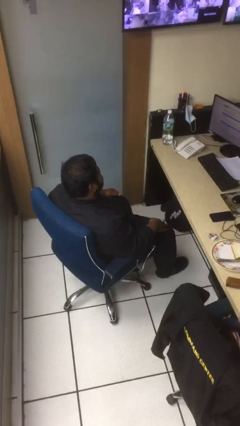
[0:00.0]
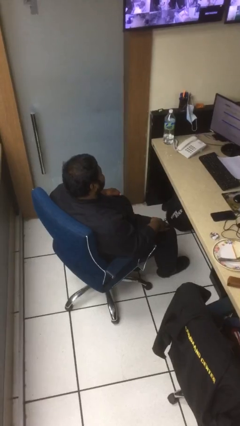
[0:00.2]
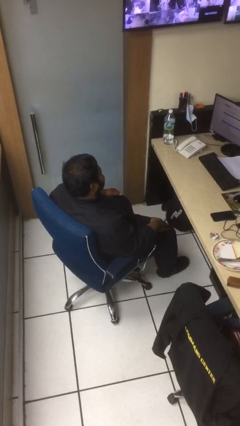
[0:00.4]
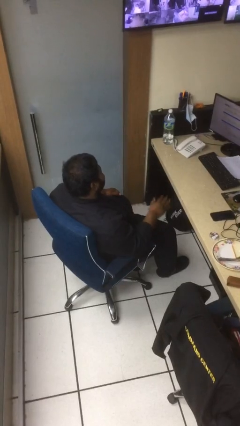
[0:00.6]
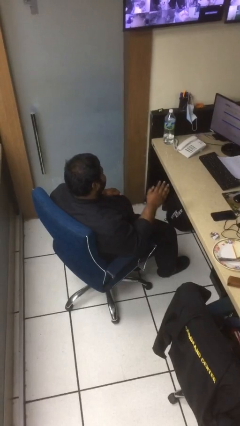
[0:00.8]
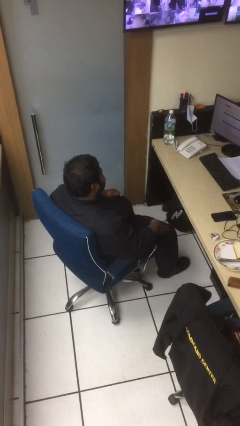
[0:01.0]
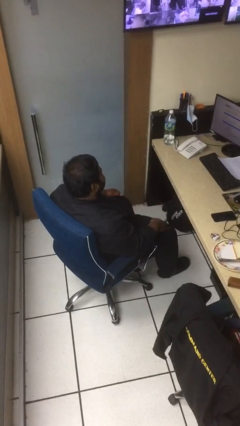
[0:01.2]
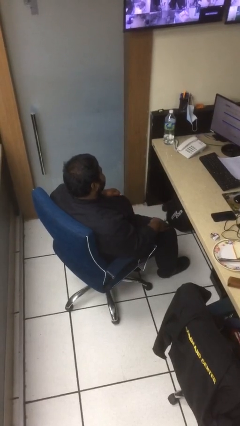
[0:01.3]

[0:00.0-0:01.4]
person slaps hands on thighs

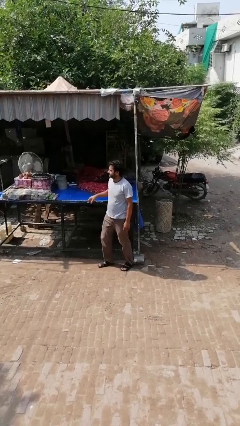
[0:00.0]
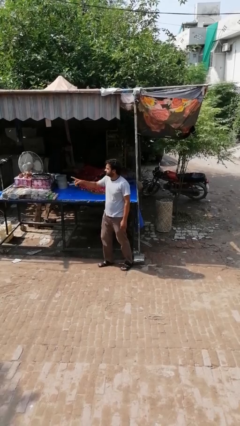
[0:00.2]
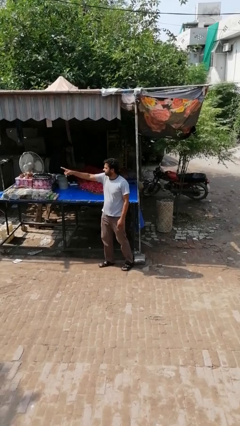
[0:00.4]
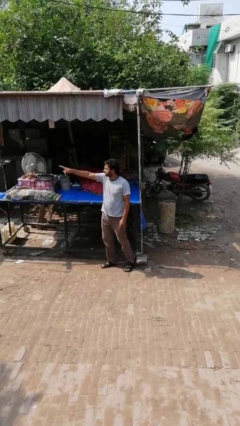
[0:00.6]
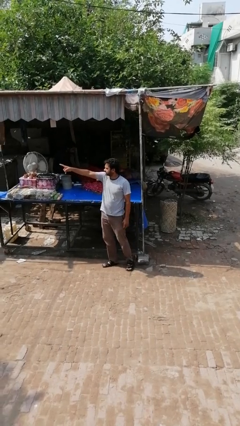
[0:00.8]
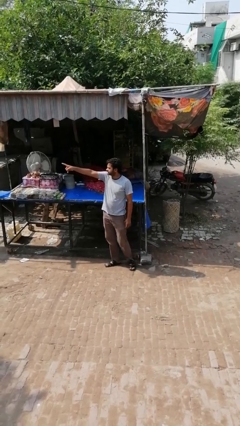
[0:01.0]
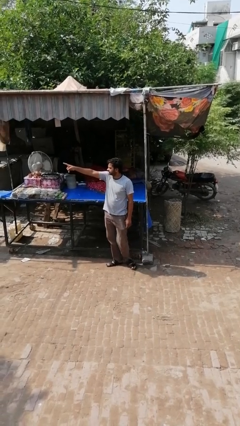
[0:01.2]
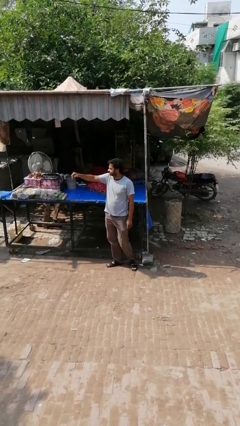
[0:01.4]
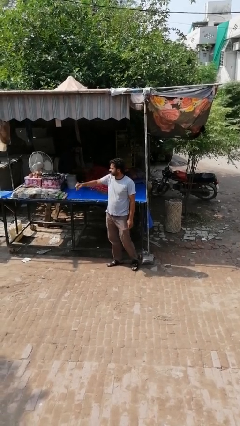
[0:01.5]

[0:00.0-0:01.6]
person points at person

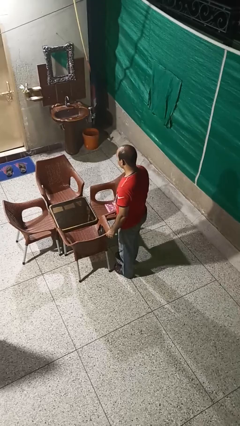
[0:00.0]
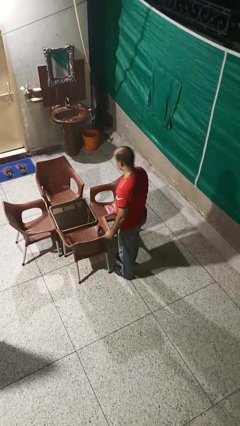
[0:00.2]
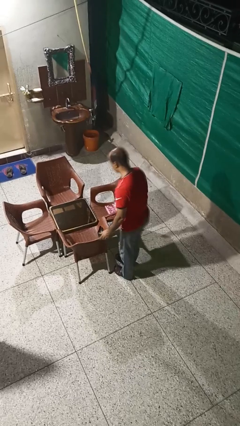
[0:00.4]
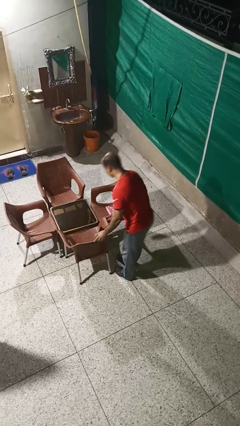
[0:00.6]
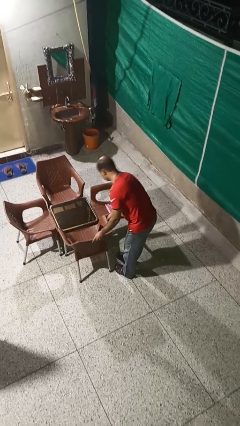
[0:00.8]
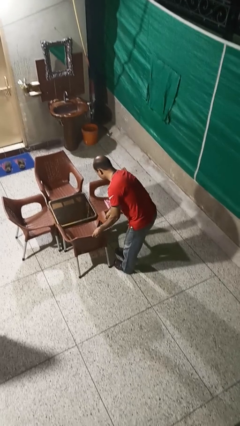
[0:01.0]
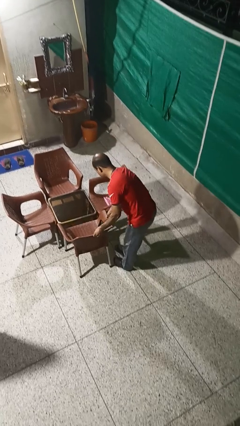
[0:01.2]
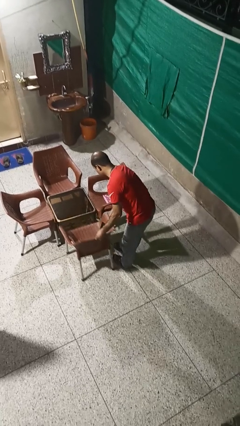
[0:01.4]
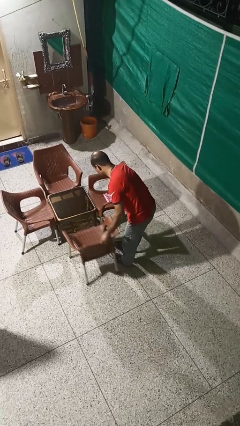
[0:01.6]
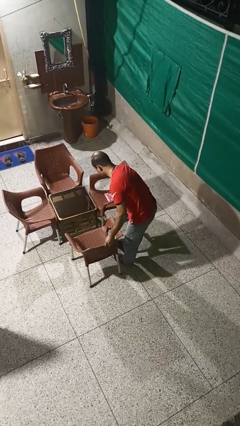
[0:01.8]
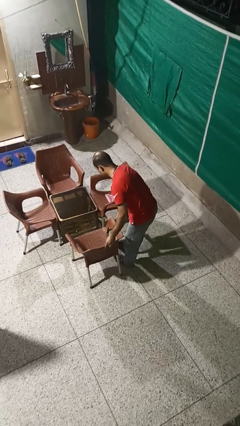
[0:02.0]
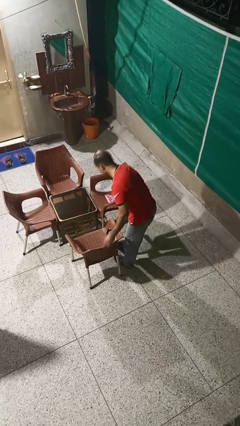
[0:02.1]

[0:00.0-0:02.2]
person pulls out chair

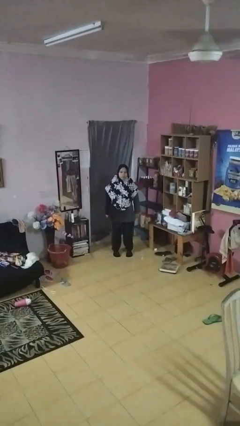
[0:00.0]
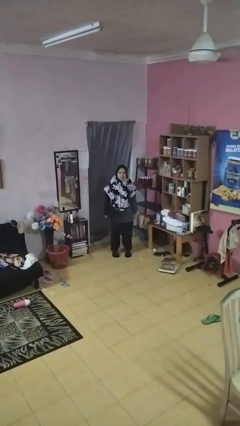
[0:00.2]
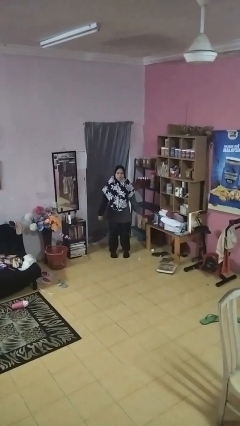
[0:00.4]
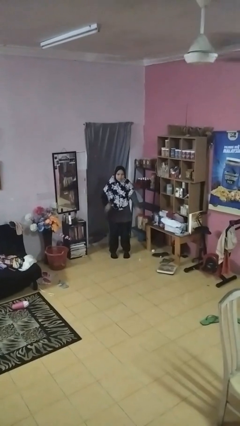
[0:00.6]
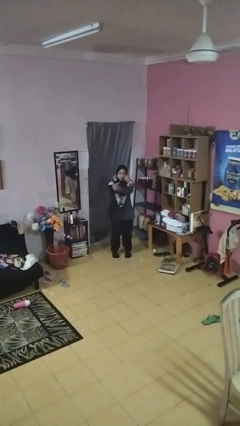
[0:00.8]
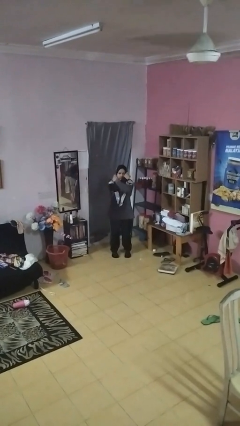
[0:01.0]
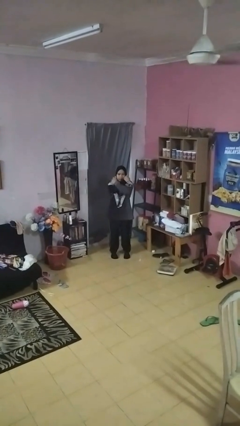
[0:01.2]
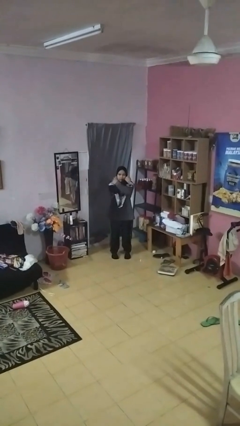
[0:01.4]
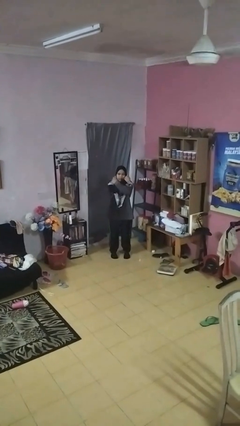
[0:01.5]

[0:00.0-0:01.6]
person crosses arms

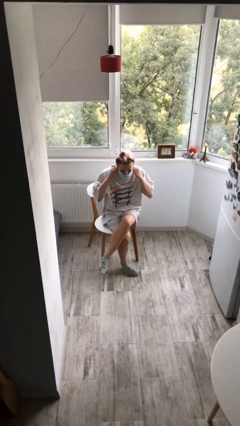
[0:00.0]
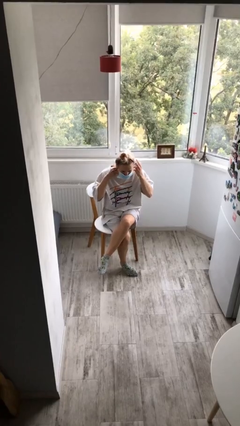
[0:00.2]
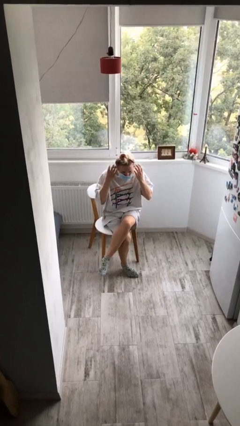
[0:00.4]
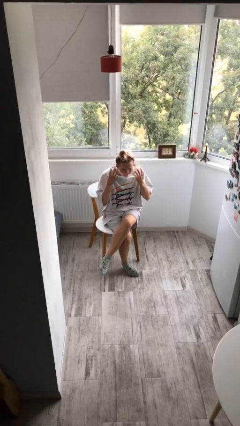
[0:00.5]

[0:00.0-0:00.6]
person takes off facemask

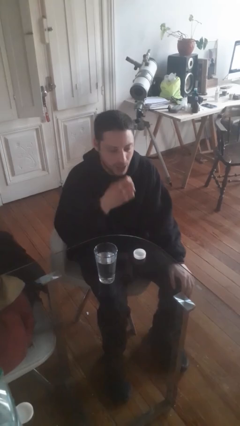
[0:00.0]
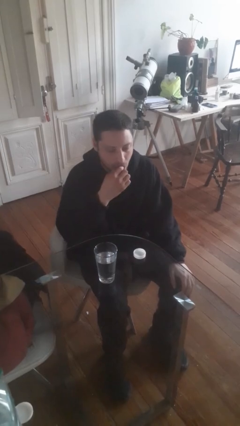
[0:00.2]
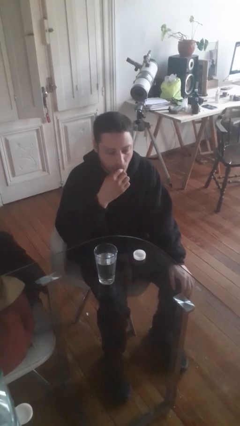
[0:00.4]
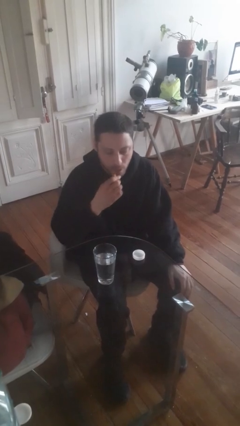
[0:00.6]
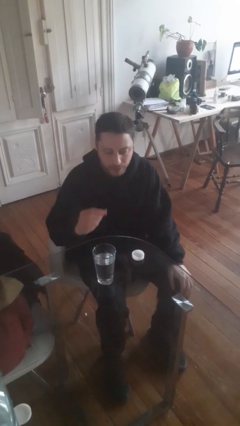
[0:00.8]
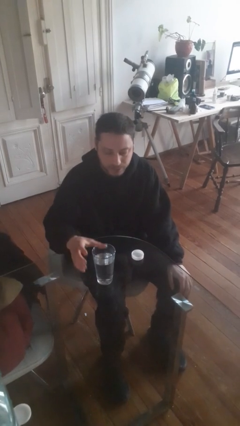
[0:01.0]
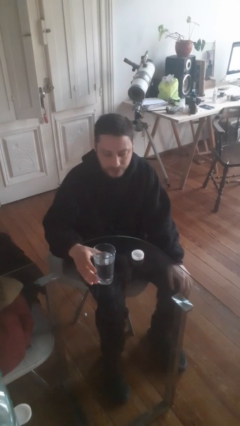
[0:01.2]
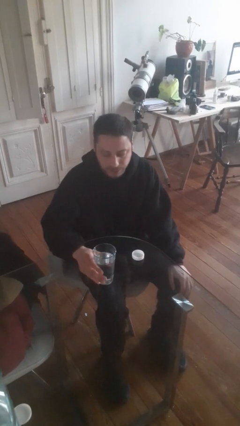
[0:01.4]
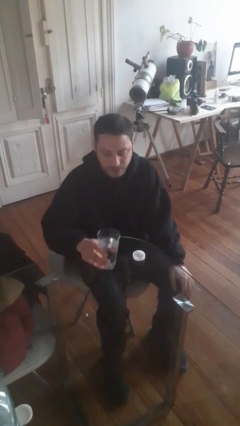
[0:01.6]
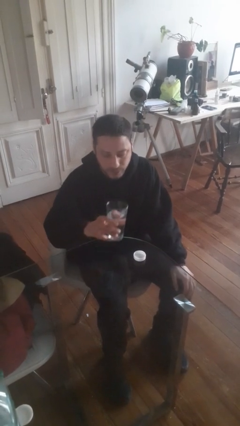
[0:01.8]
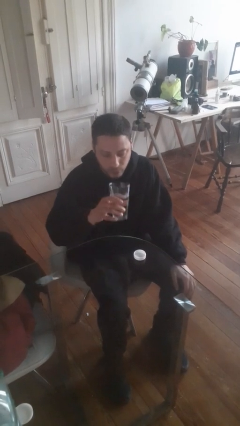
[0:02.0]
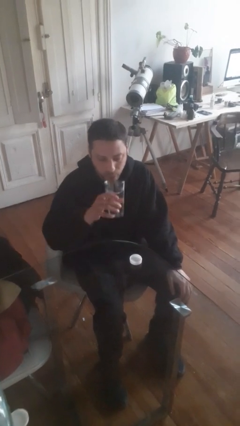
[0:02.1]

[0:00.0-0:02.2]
person takes medicine pills

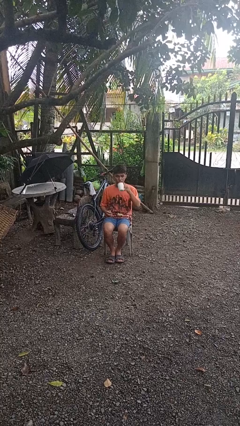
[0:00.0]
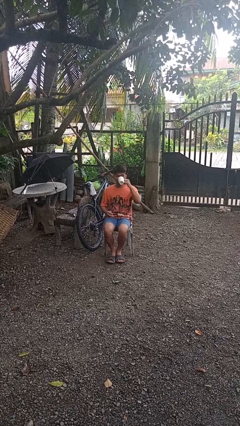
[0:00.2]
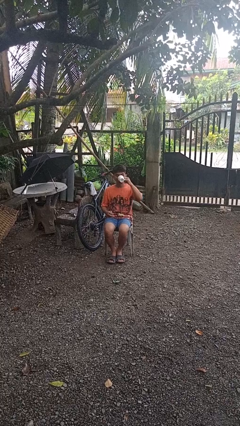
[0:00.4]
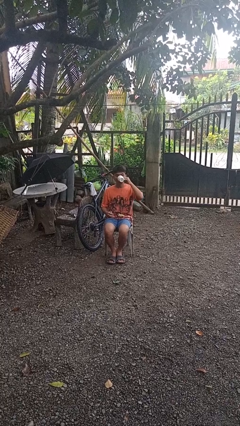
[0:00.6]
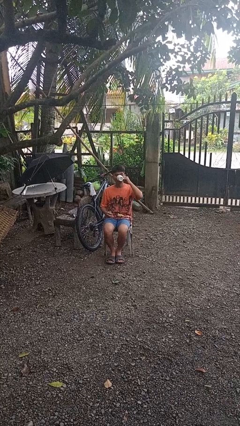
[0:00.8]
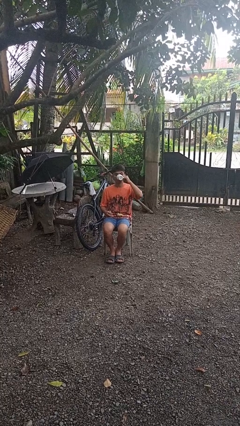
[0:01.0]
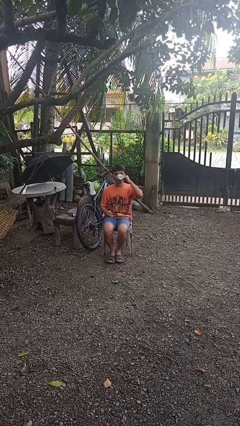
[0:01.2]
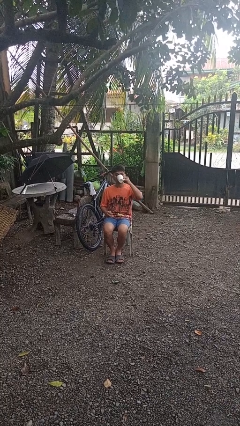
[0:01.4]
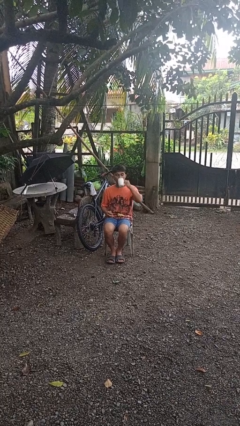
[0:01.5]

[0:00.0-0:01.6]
person drinks from mug

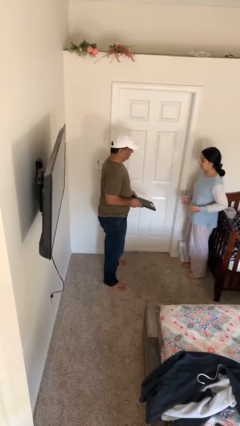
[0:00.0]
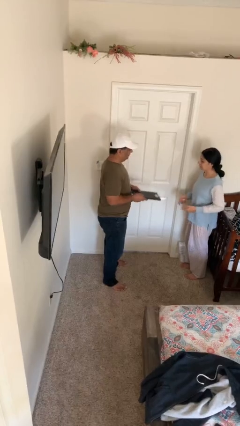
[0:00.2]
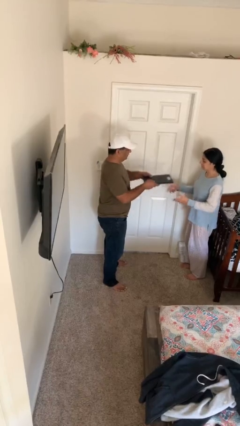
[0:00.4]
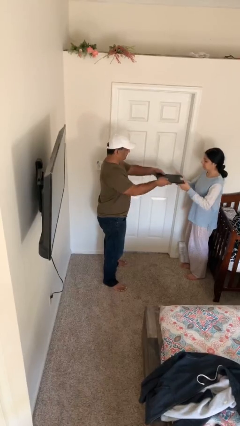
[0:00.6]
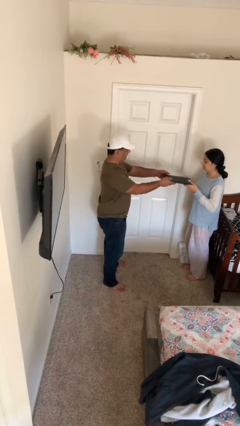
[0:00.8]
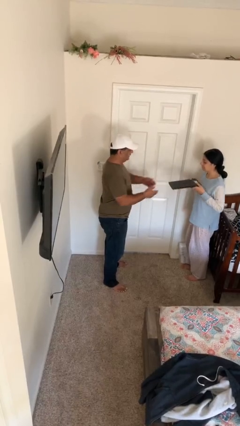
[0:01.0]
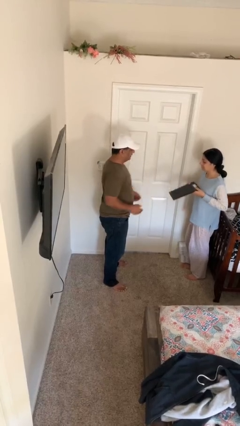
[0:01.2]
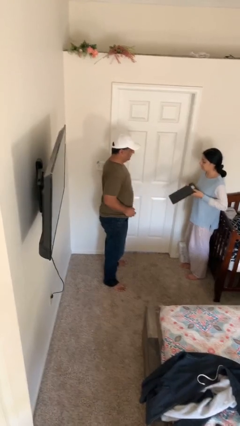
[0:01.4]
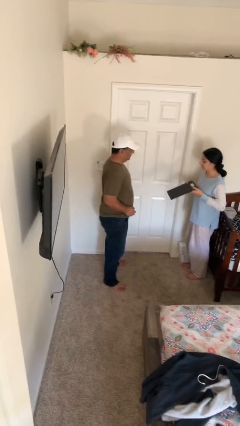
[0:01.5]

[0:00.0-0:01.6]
person transfers object to person

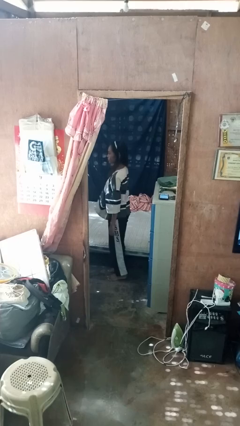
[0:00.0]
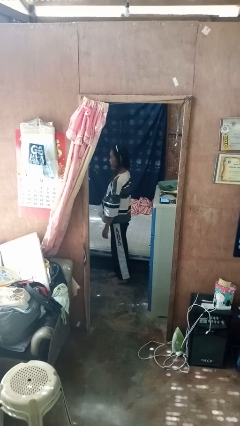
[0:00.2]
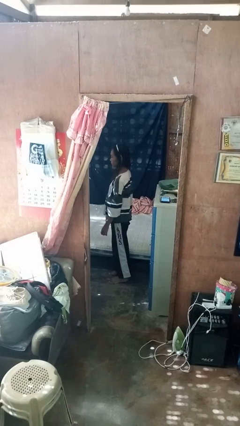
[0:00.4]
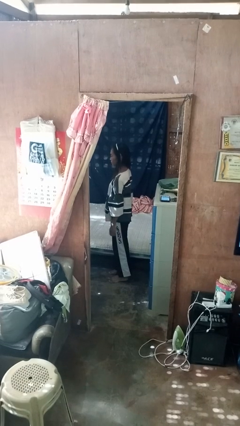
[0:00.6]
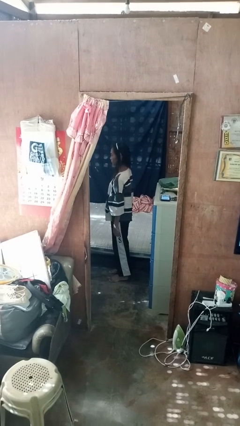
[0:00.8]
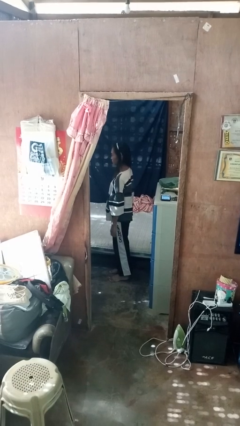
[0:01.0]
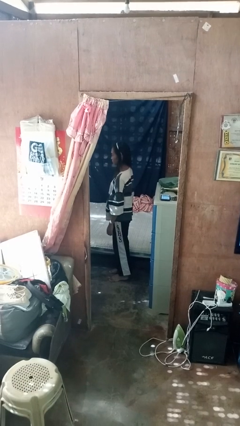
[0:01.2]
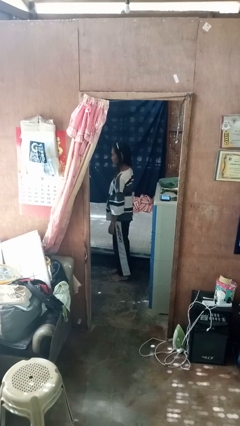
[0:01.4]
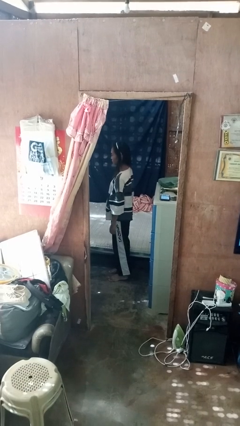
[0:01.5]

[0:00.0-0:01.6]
person stands up

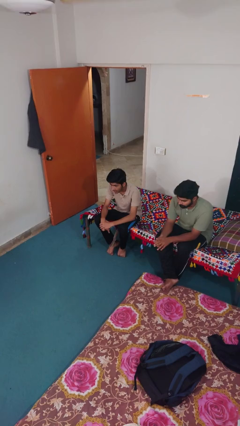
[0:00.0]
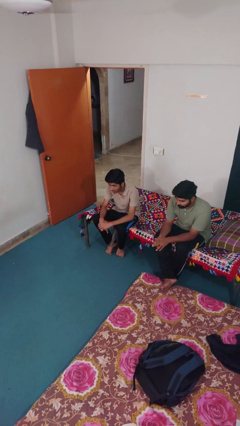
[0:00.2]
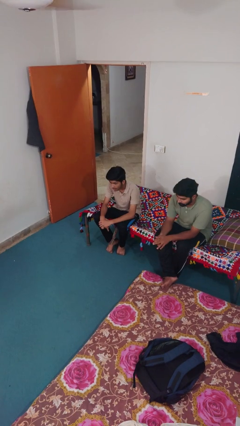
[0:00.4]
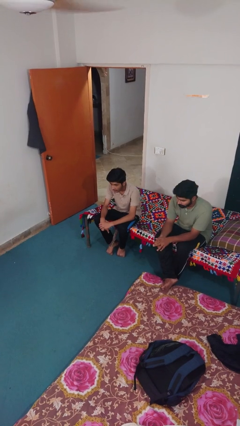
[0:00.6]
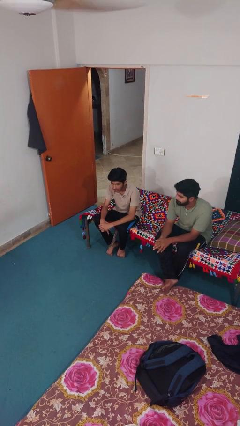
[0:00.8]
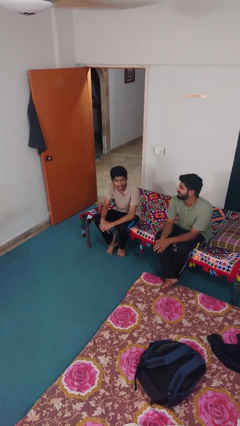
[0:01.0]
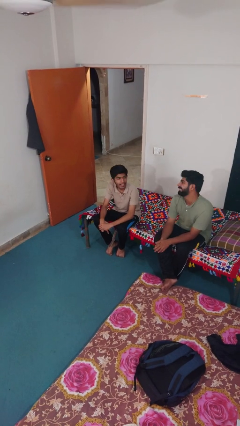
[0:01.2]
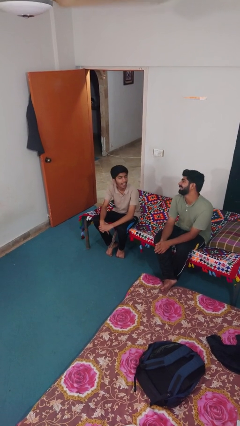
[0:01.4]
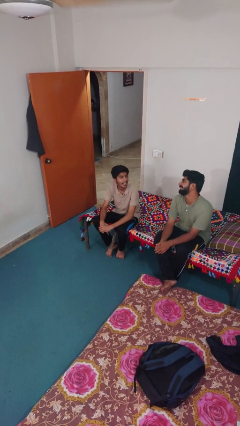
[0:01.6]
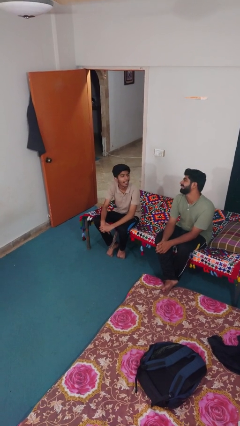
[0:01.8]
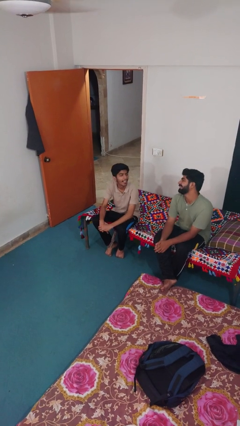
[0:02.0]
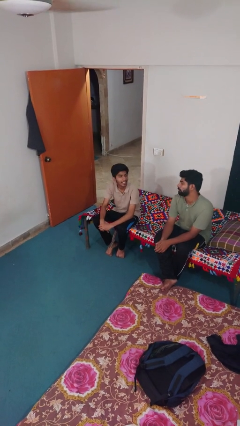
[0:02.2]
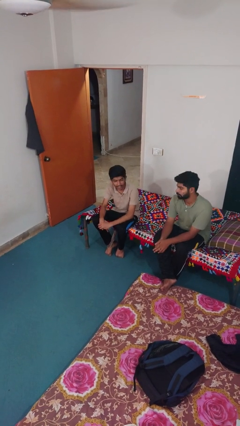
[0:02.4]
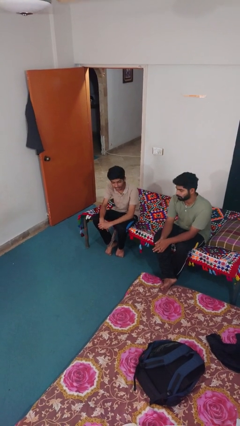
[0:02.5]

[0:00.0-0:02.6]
person laughs with person
